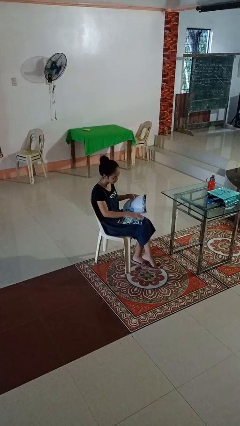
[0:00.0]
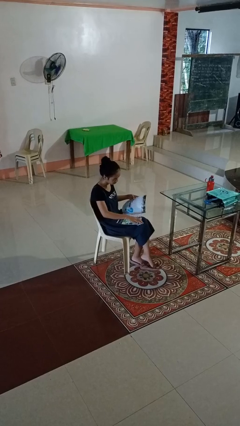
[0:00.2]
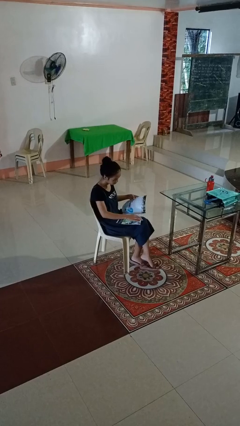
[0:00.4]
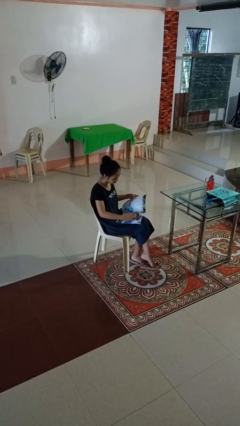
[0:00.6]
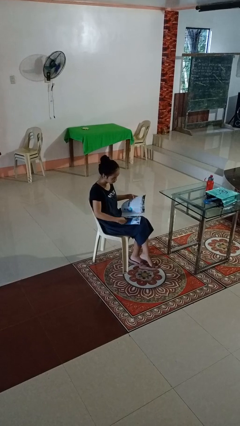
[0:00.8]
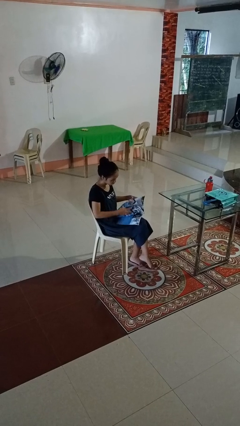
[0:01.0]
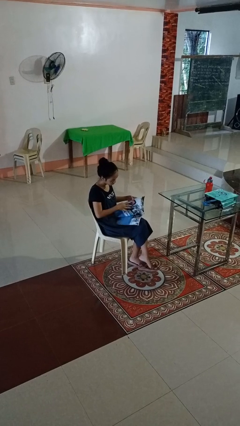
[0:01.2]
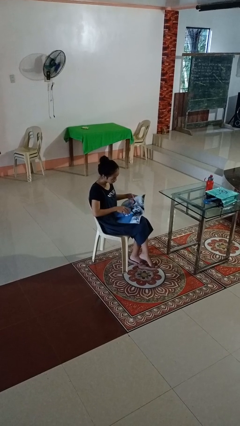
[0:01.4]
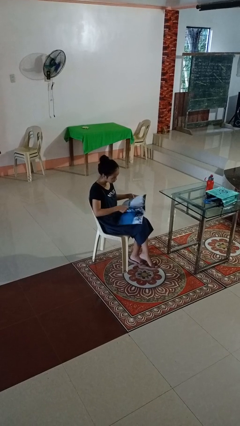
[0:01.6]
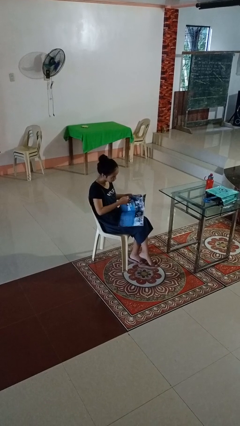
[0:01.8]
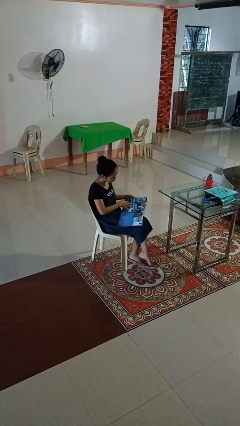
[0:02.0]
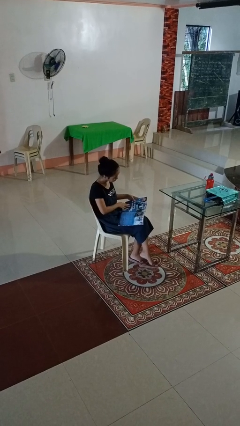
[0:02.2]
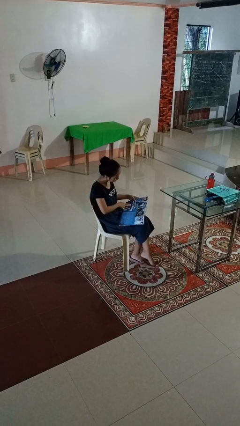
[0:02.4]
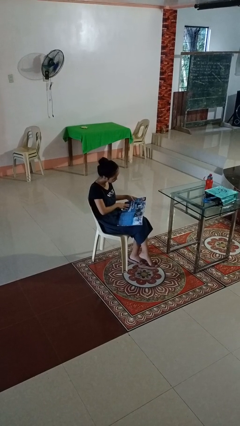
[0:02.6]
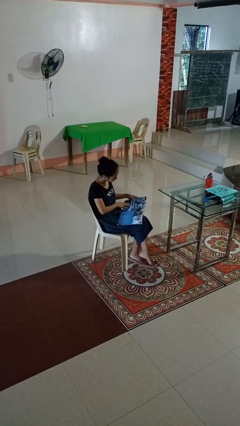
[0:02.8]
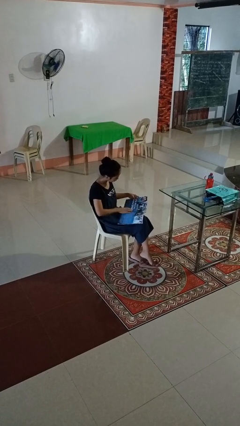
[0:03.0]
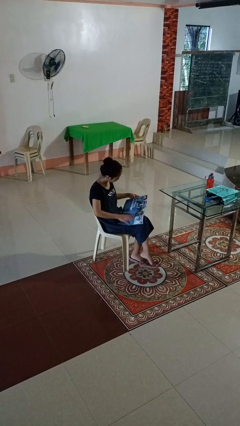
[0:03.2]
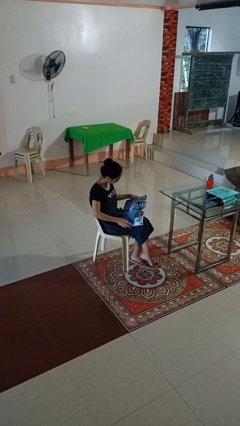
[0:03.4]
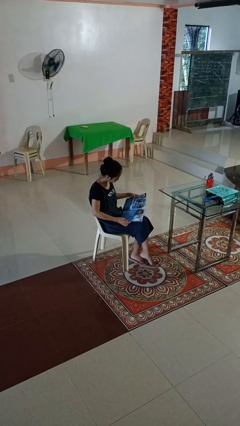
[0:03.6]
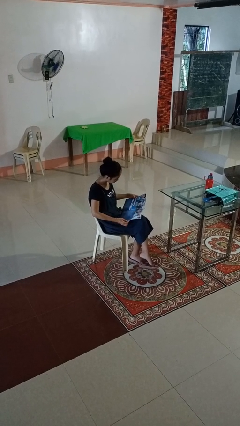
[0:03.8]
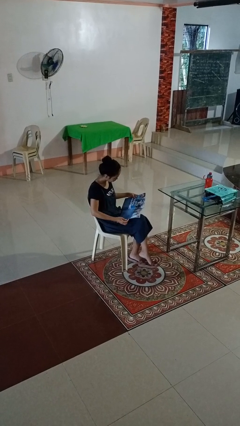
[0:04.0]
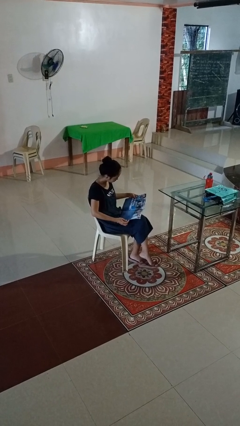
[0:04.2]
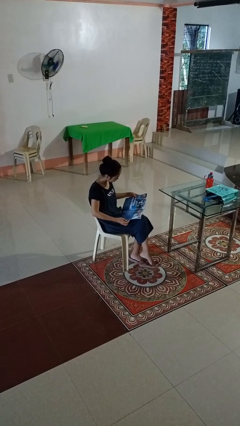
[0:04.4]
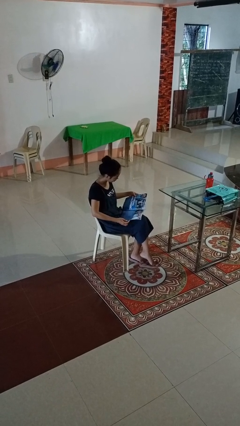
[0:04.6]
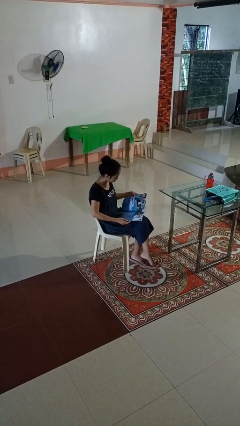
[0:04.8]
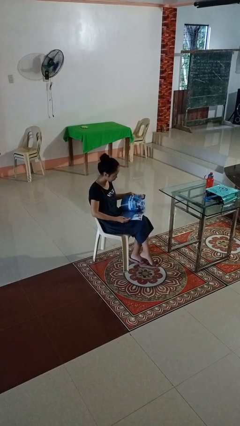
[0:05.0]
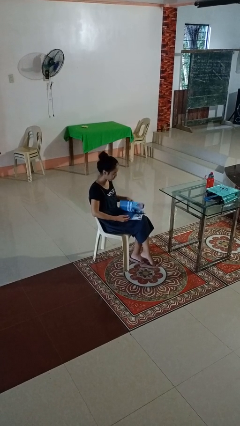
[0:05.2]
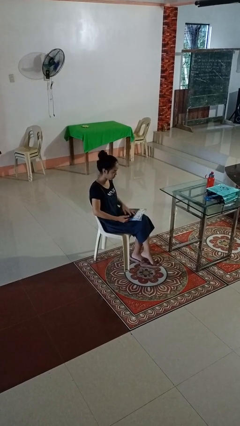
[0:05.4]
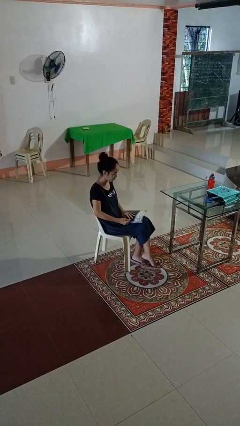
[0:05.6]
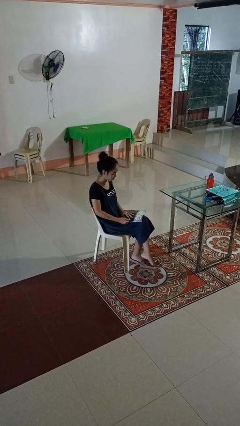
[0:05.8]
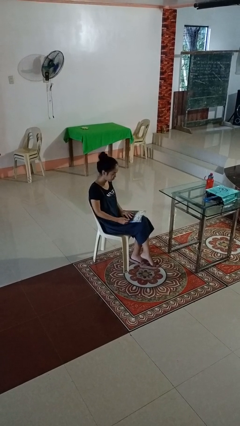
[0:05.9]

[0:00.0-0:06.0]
person reads magazine

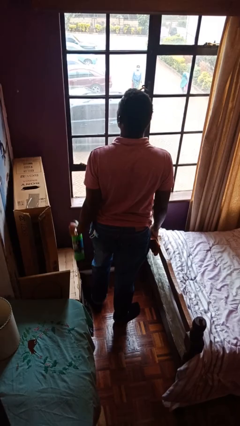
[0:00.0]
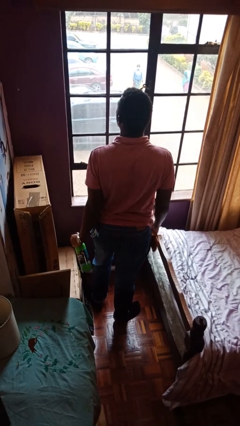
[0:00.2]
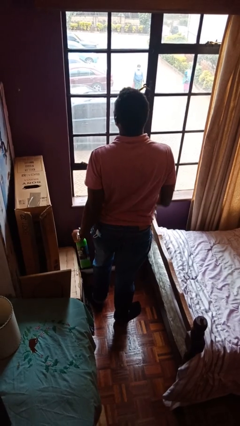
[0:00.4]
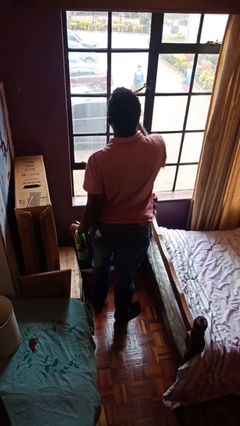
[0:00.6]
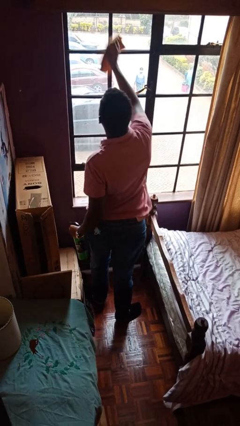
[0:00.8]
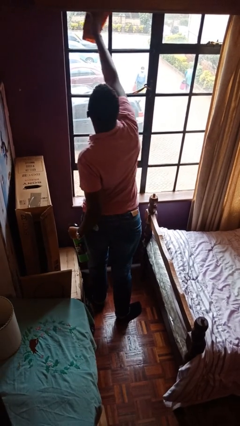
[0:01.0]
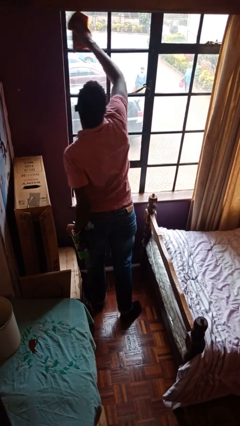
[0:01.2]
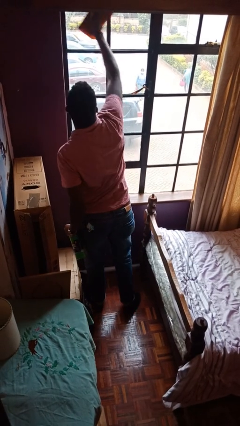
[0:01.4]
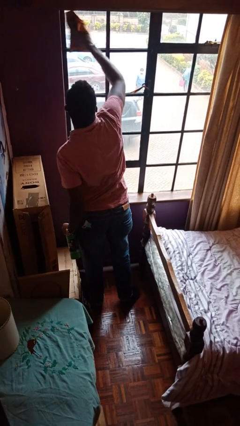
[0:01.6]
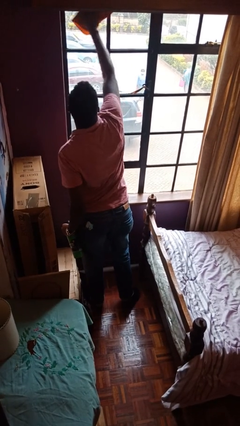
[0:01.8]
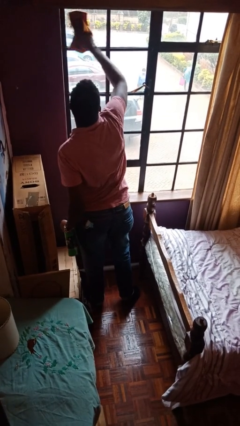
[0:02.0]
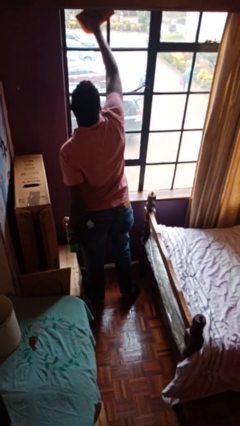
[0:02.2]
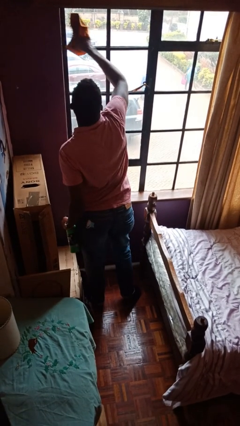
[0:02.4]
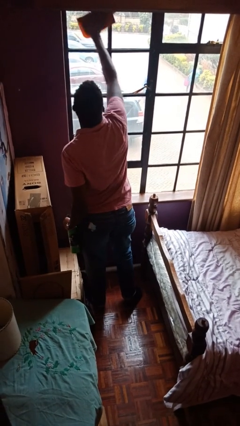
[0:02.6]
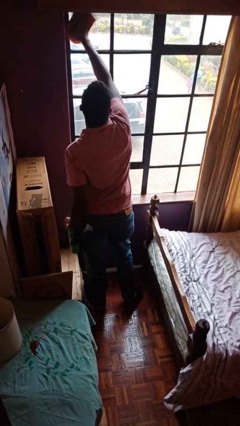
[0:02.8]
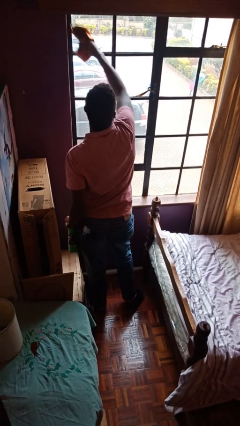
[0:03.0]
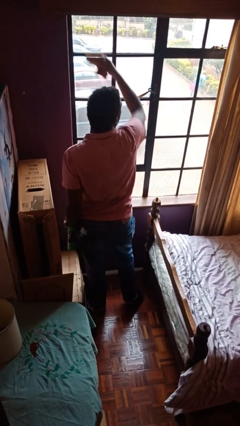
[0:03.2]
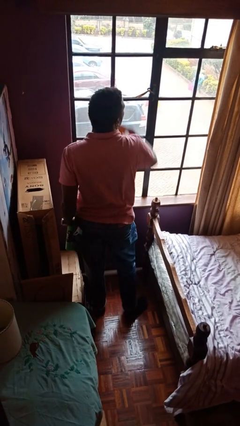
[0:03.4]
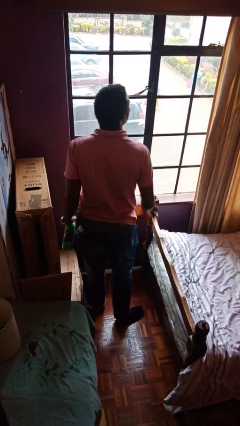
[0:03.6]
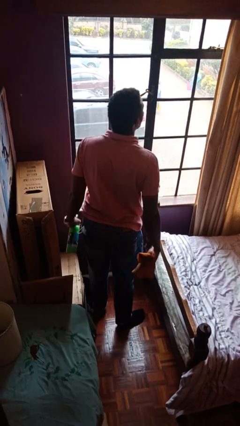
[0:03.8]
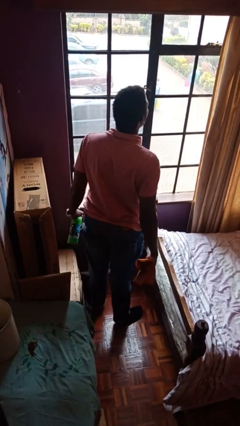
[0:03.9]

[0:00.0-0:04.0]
person washes window

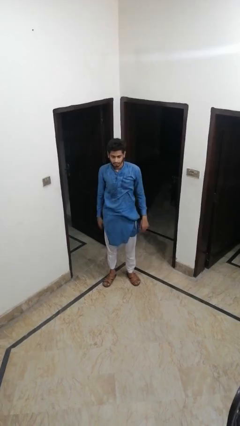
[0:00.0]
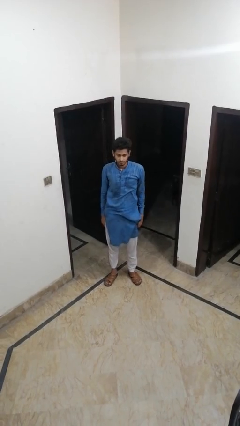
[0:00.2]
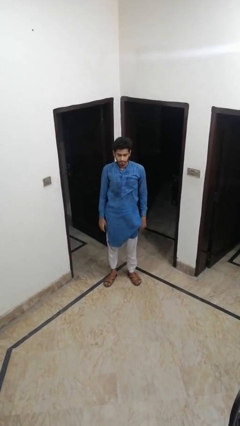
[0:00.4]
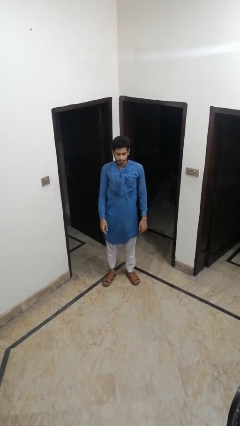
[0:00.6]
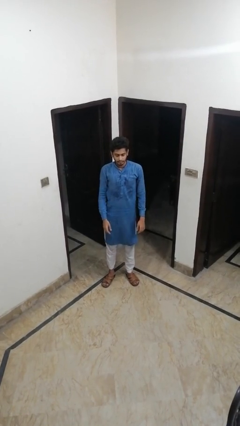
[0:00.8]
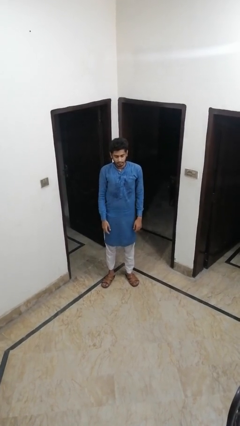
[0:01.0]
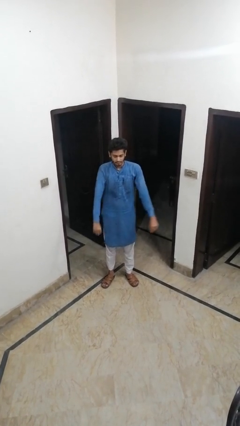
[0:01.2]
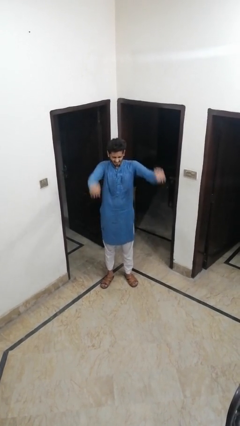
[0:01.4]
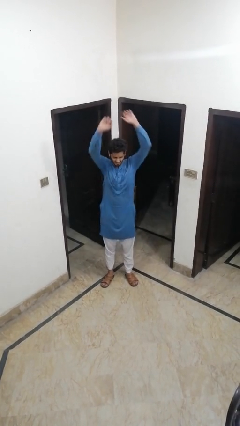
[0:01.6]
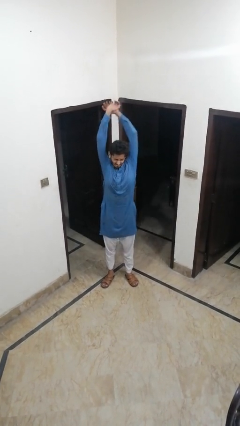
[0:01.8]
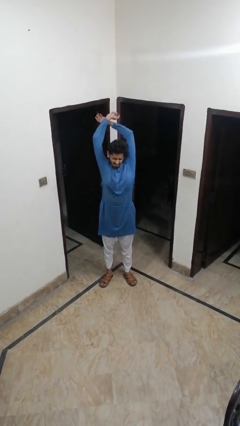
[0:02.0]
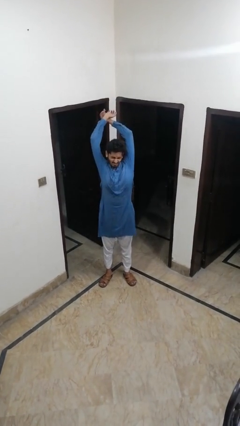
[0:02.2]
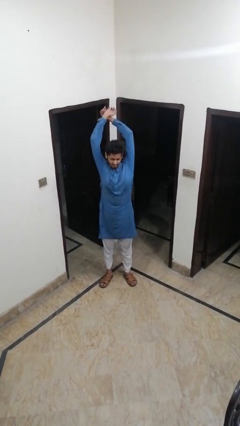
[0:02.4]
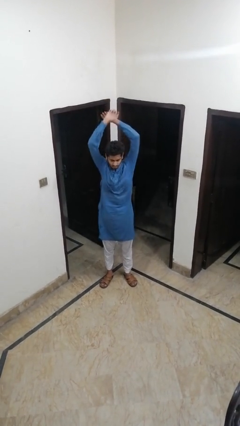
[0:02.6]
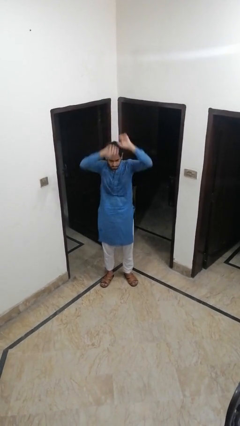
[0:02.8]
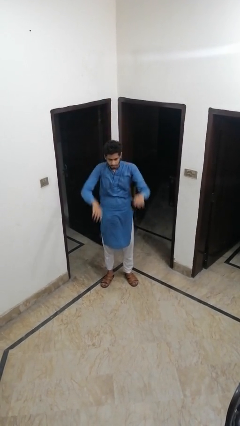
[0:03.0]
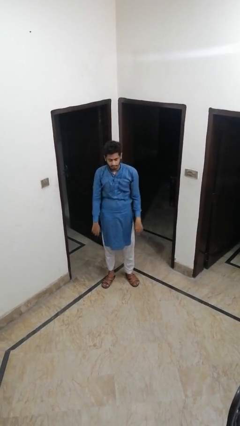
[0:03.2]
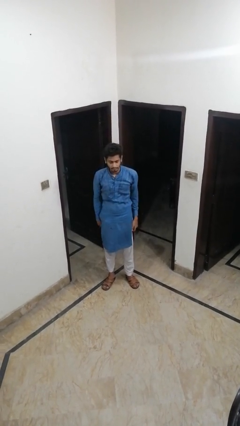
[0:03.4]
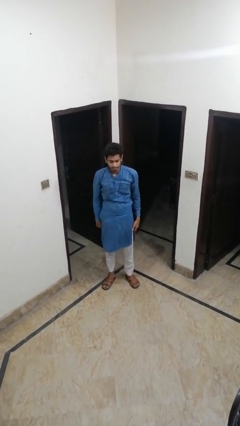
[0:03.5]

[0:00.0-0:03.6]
person stretches arms over head

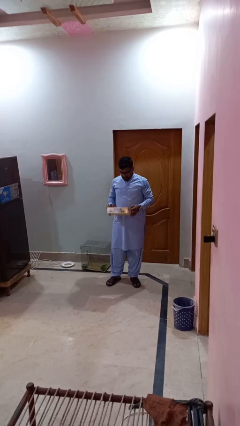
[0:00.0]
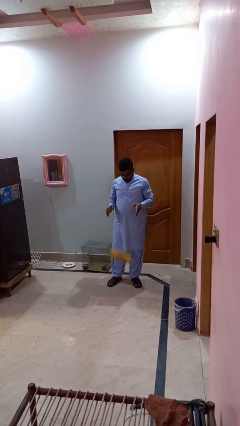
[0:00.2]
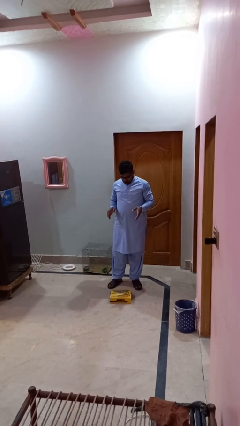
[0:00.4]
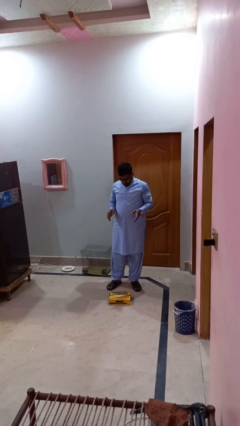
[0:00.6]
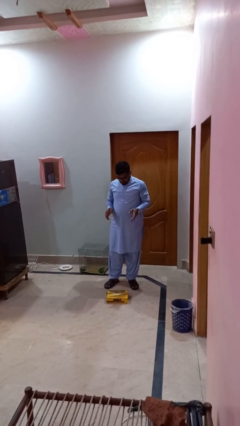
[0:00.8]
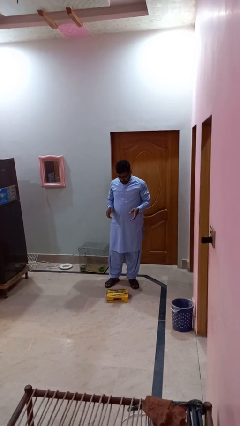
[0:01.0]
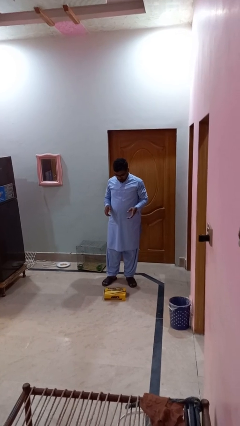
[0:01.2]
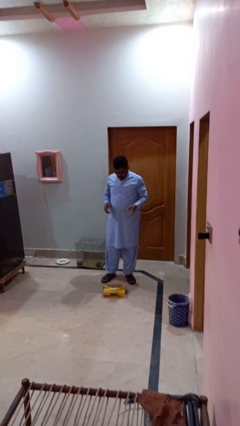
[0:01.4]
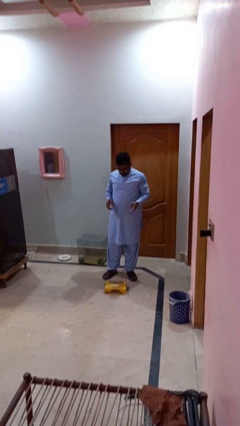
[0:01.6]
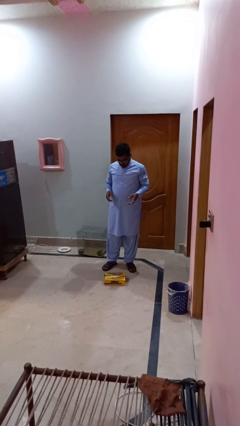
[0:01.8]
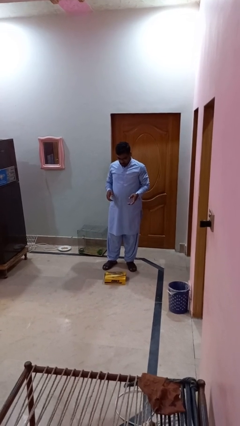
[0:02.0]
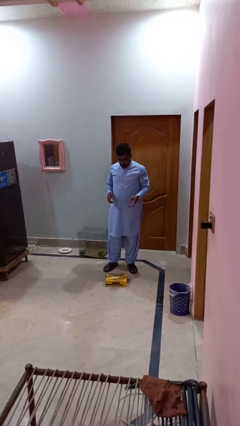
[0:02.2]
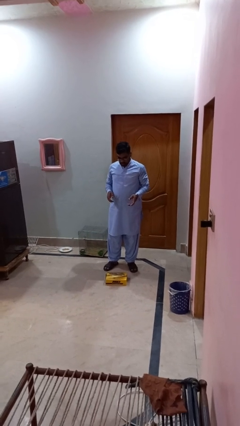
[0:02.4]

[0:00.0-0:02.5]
person drops object

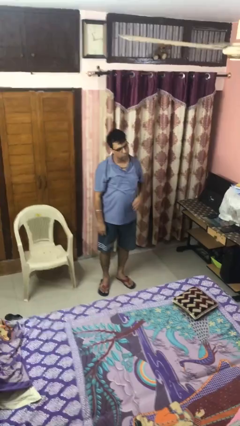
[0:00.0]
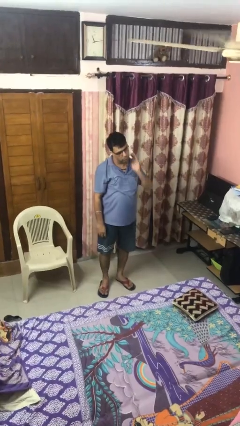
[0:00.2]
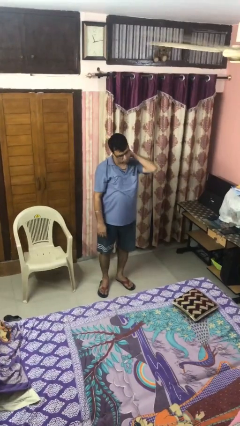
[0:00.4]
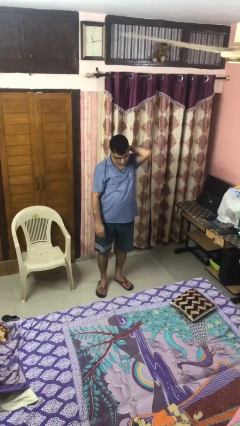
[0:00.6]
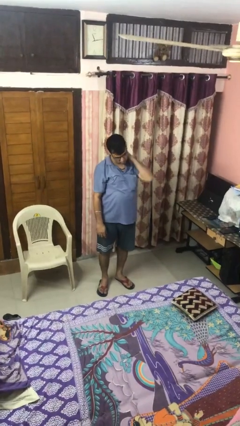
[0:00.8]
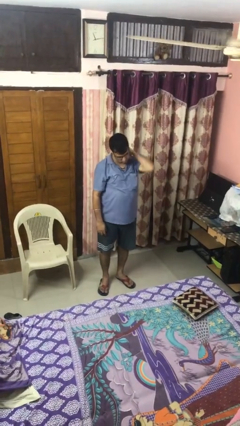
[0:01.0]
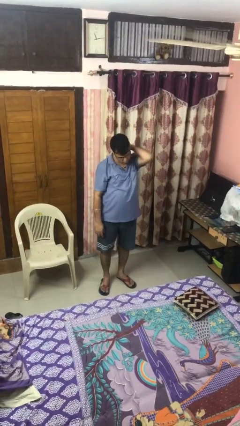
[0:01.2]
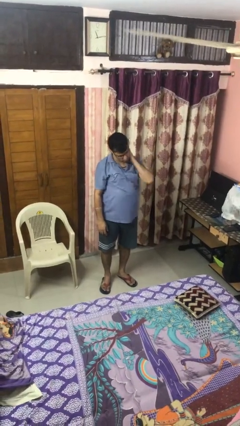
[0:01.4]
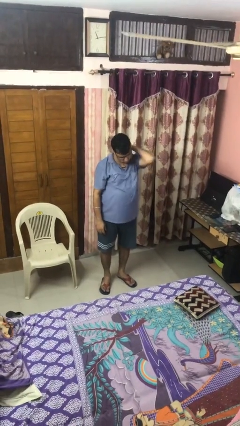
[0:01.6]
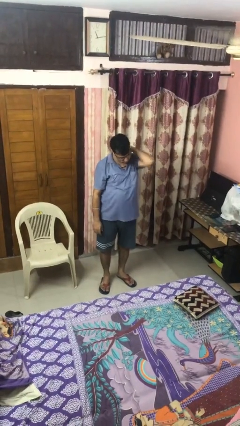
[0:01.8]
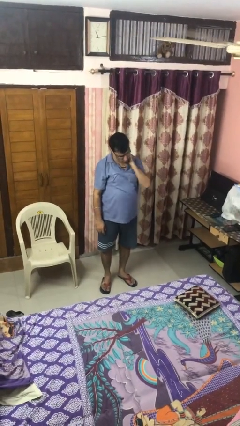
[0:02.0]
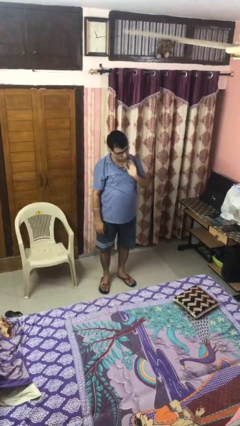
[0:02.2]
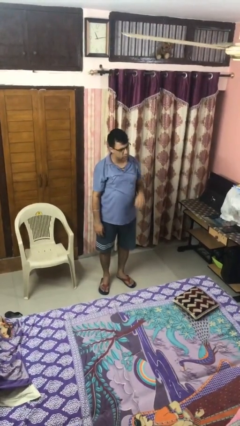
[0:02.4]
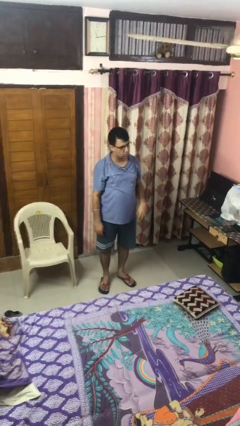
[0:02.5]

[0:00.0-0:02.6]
person rubs neck
